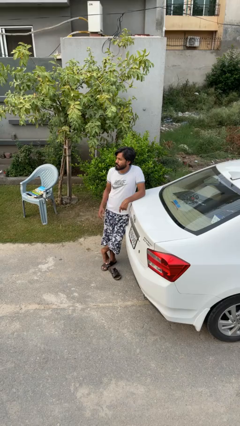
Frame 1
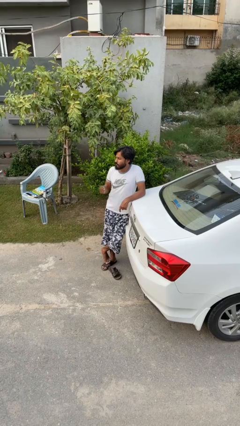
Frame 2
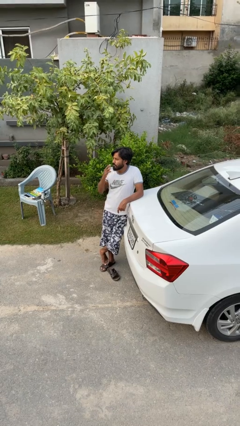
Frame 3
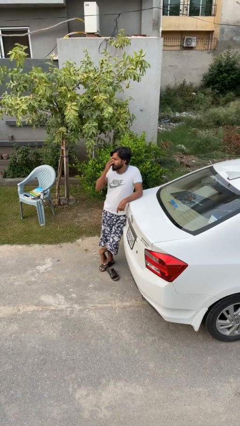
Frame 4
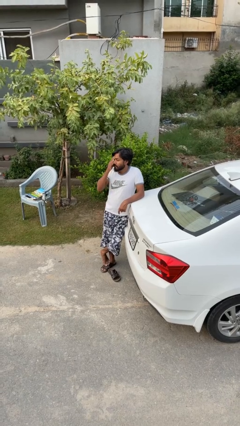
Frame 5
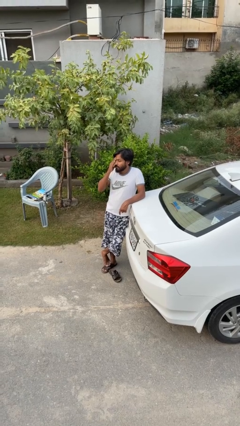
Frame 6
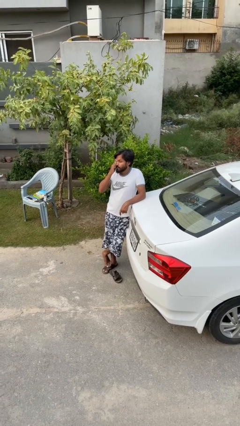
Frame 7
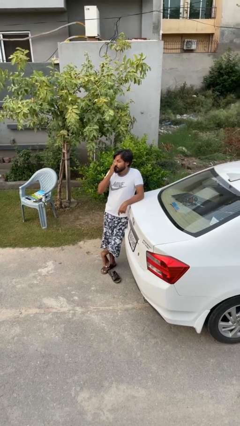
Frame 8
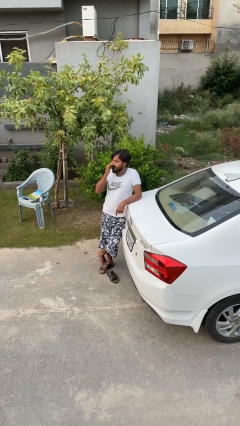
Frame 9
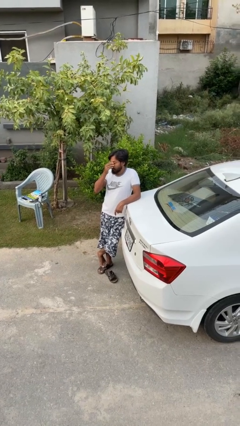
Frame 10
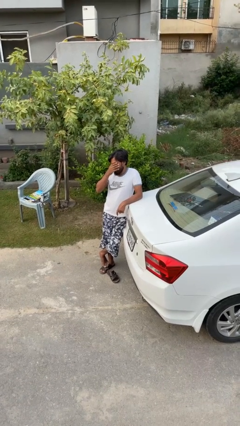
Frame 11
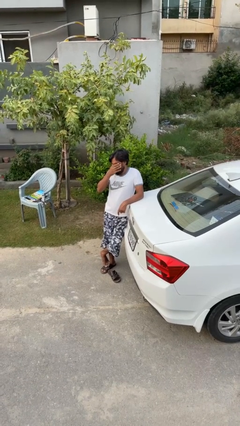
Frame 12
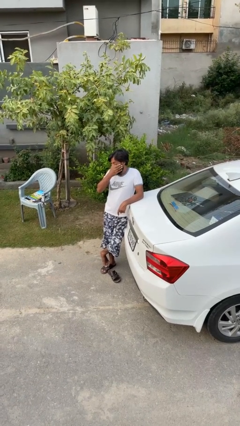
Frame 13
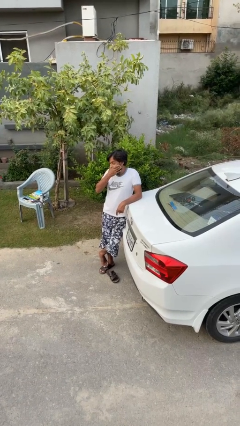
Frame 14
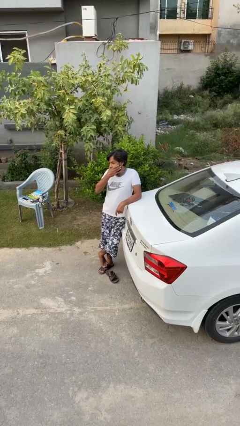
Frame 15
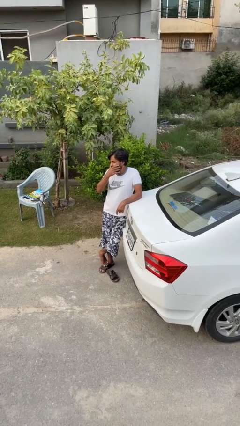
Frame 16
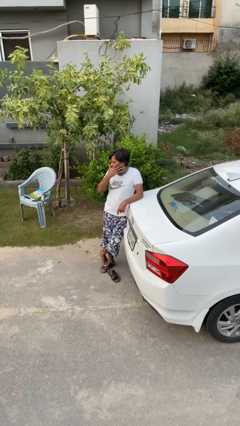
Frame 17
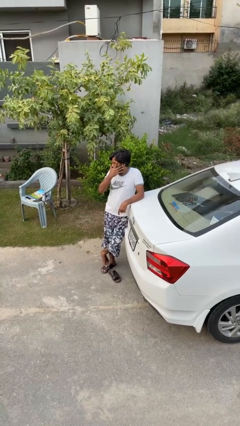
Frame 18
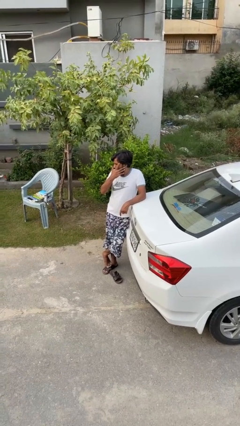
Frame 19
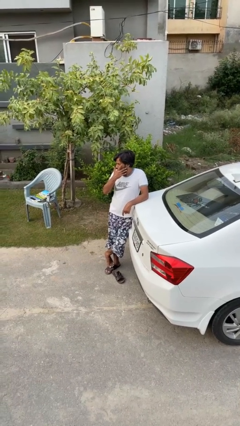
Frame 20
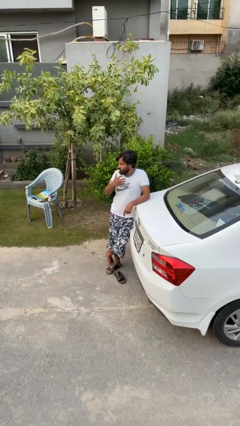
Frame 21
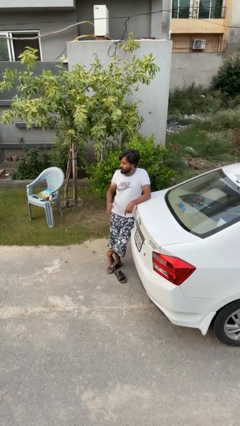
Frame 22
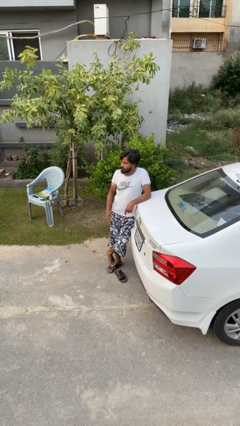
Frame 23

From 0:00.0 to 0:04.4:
person scratches face

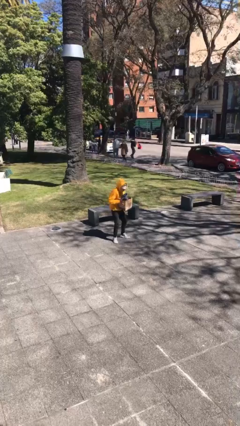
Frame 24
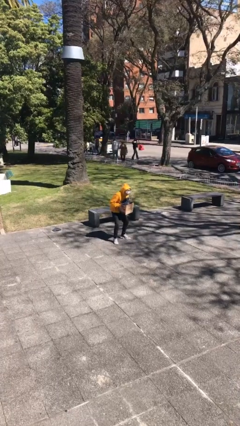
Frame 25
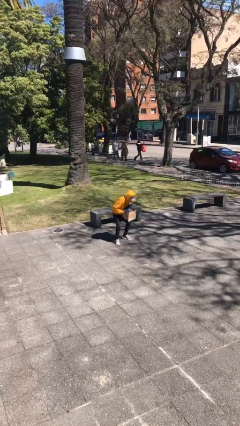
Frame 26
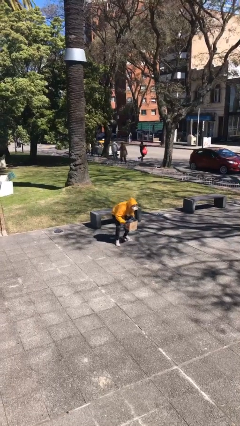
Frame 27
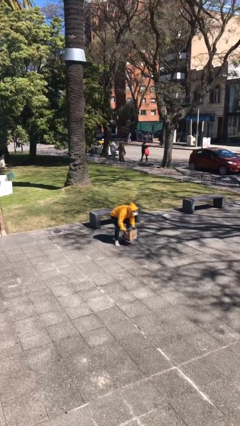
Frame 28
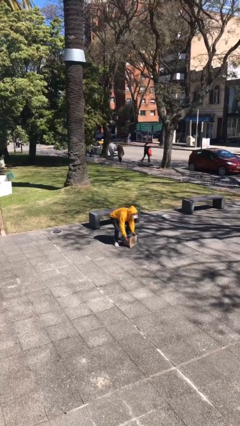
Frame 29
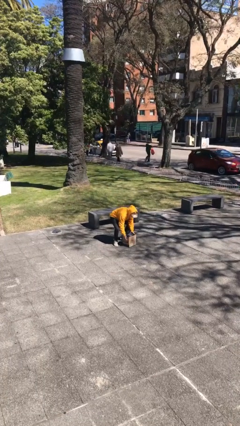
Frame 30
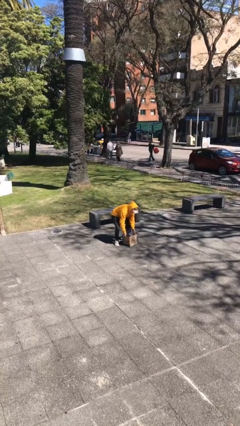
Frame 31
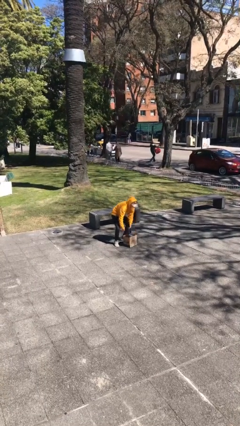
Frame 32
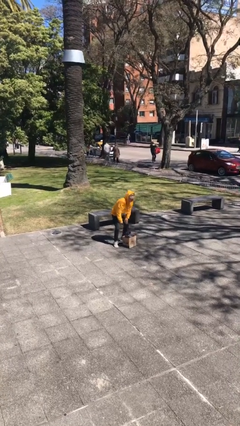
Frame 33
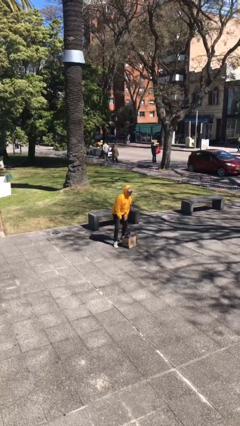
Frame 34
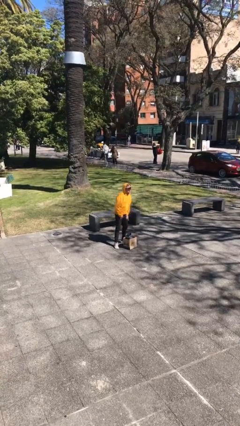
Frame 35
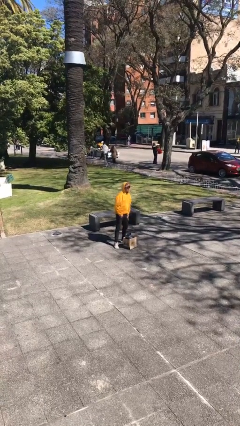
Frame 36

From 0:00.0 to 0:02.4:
person puts down object on floor

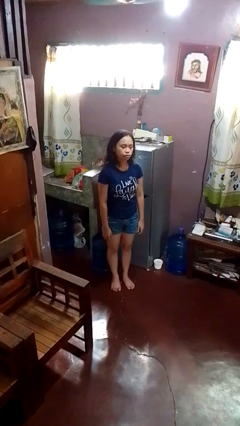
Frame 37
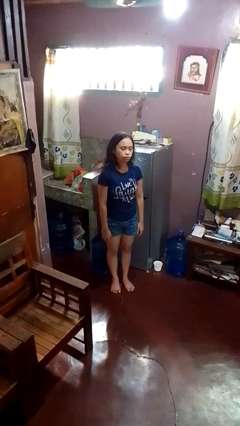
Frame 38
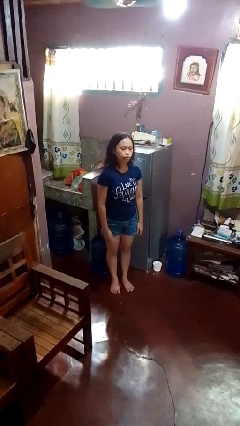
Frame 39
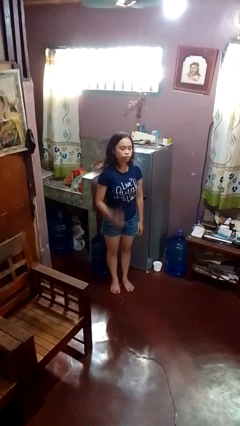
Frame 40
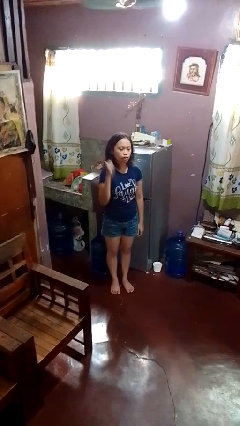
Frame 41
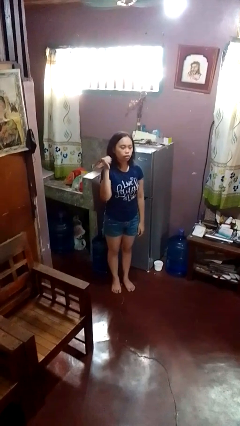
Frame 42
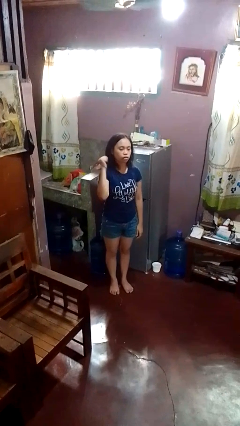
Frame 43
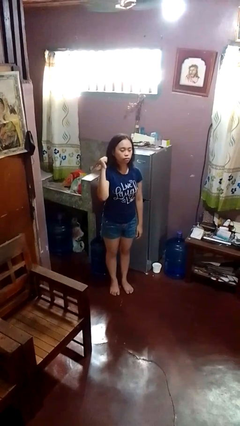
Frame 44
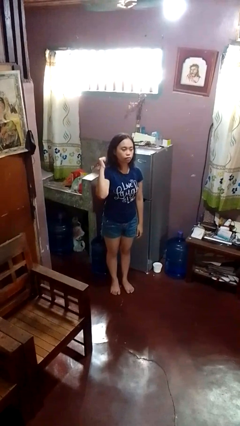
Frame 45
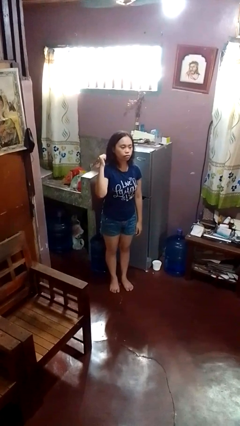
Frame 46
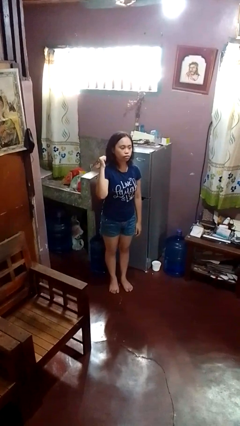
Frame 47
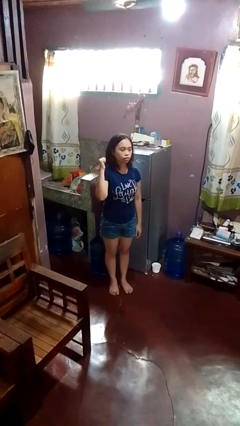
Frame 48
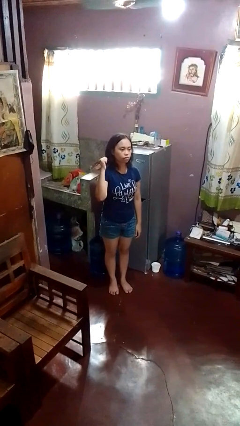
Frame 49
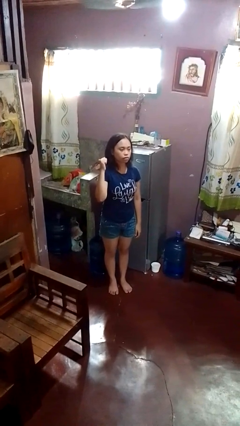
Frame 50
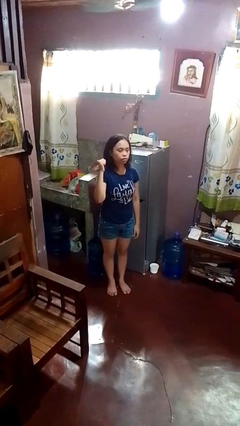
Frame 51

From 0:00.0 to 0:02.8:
person gestures behind me

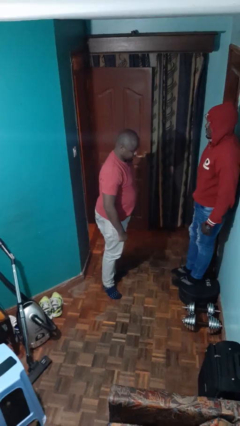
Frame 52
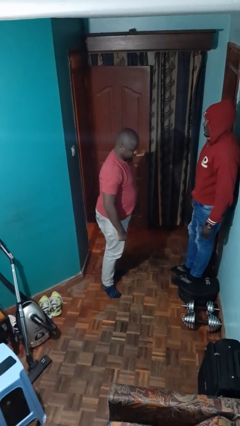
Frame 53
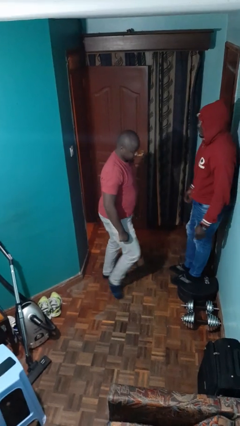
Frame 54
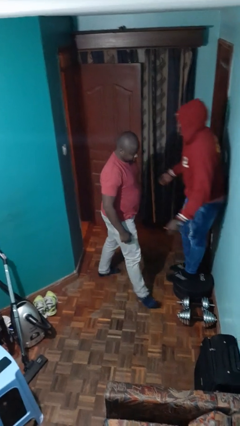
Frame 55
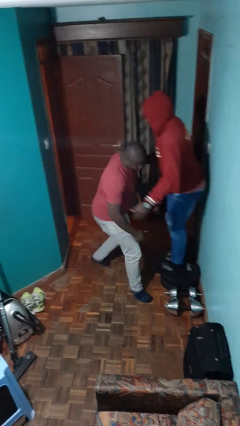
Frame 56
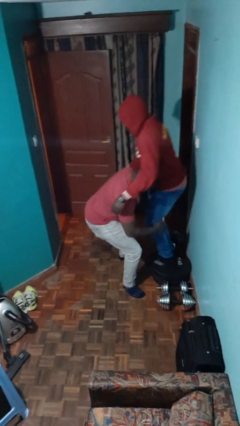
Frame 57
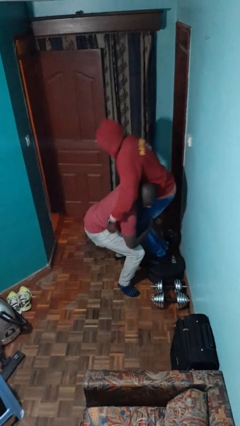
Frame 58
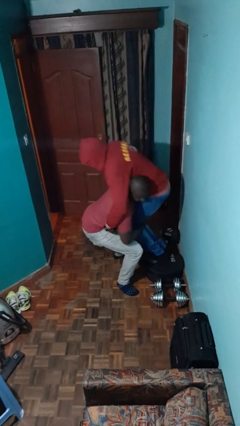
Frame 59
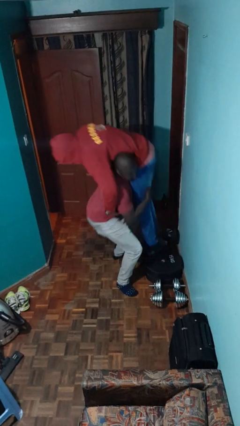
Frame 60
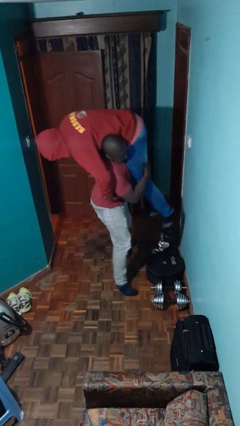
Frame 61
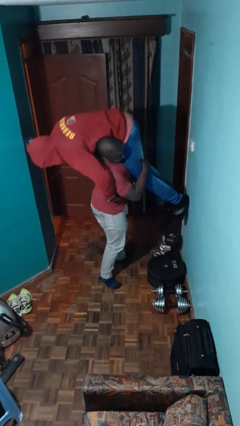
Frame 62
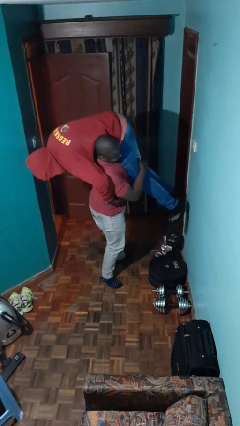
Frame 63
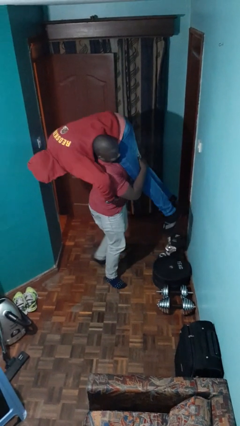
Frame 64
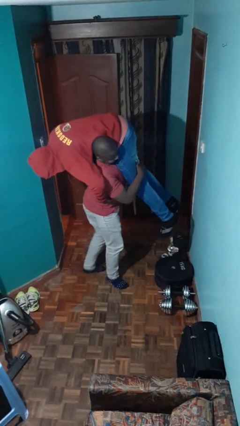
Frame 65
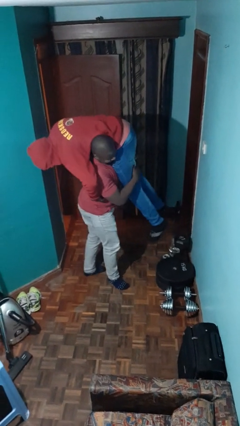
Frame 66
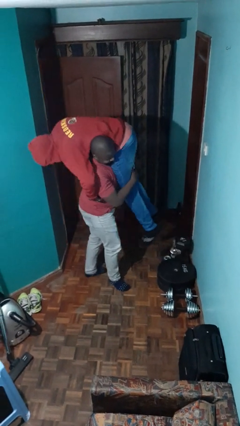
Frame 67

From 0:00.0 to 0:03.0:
person carries person over shoulder

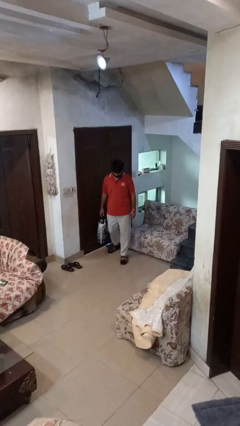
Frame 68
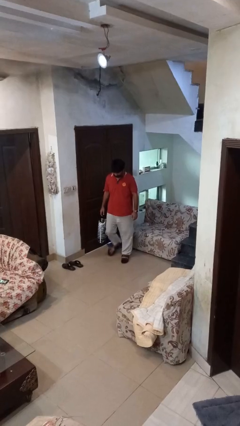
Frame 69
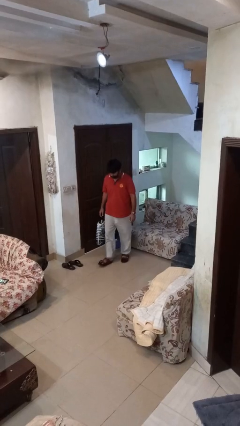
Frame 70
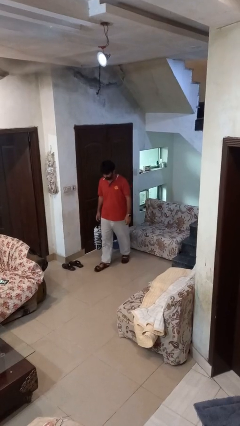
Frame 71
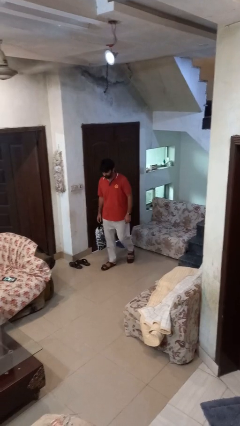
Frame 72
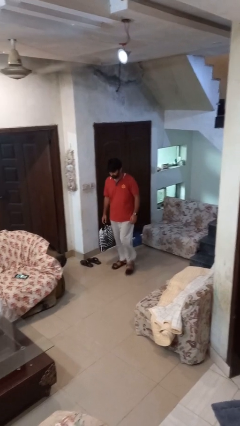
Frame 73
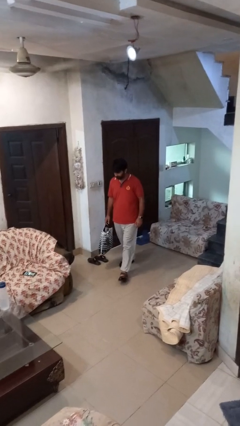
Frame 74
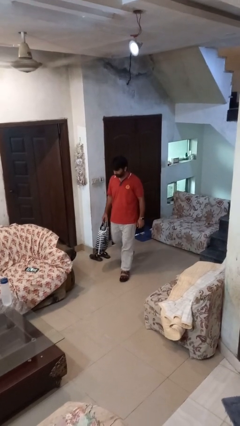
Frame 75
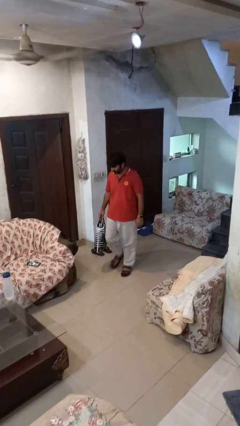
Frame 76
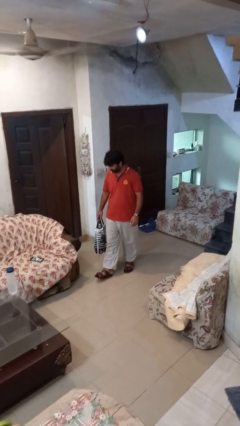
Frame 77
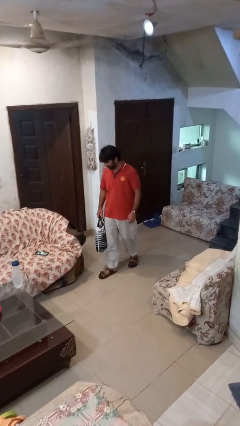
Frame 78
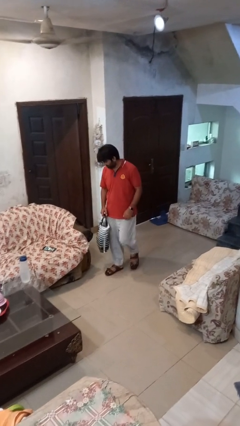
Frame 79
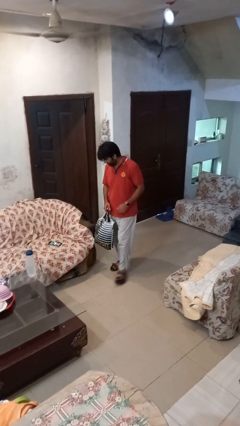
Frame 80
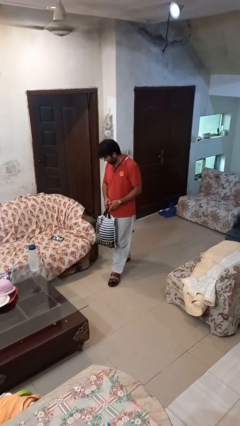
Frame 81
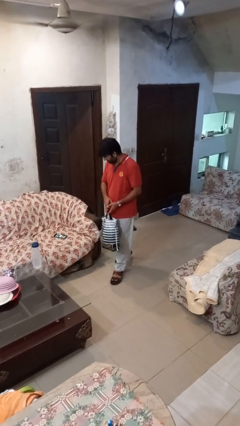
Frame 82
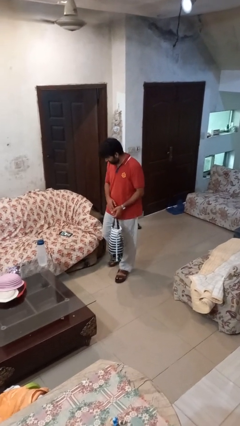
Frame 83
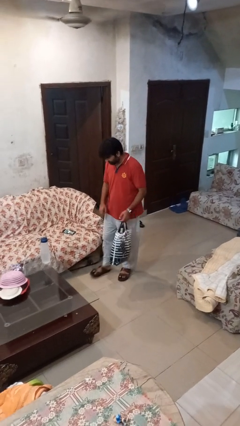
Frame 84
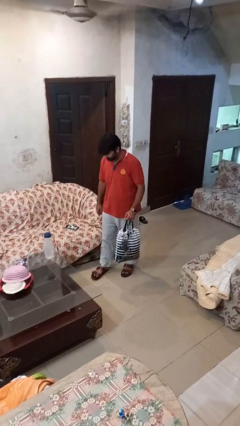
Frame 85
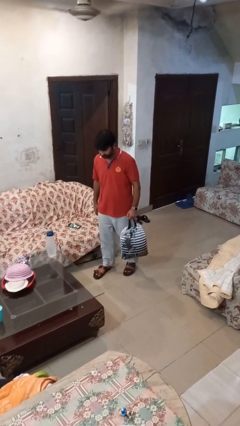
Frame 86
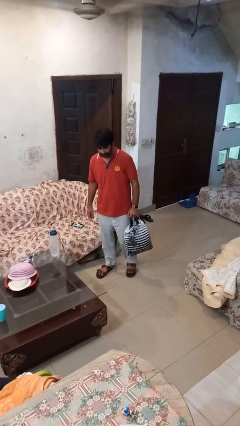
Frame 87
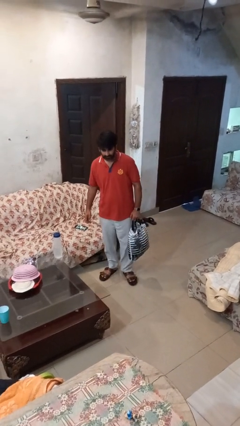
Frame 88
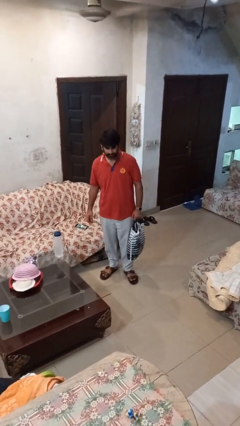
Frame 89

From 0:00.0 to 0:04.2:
person carries groceries

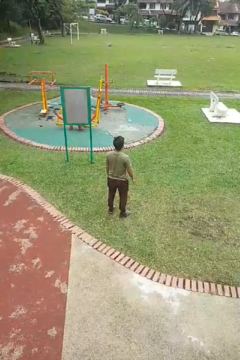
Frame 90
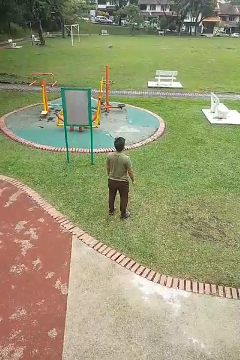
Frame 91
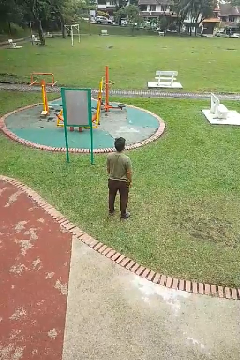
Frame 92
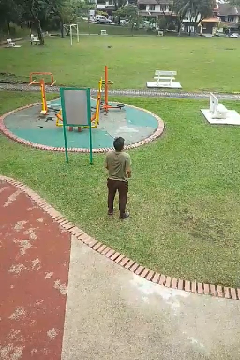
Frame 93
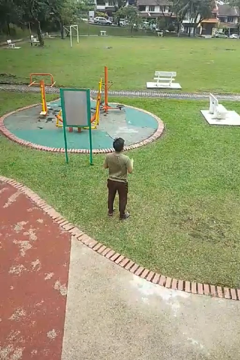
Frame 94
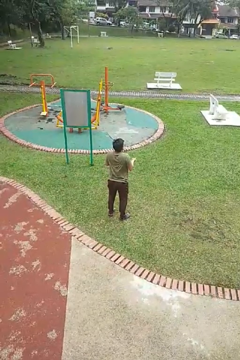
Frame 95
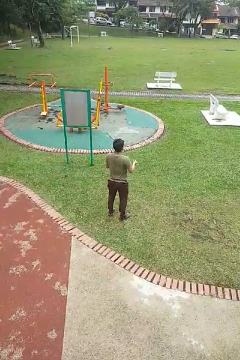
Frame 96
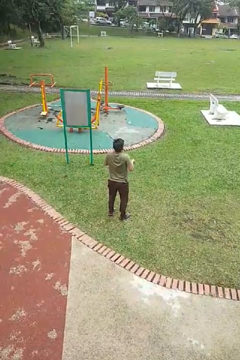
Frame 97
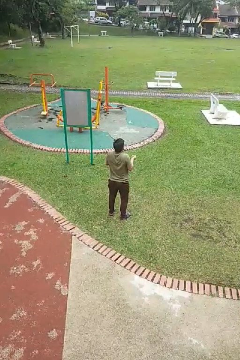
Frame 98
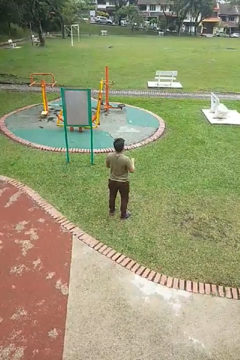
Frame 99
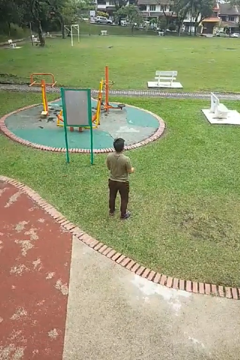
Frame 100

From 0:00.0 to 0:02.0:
person shrugs
